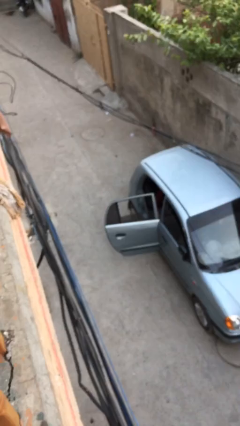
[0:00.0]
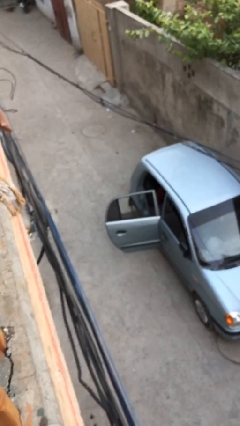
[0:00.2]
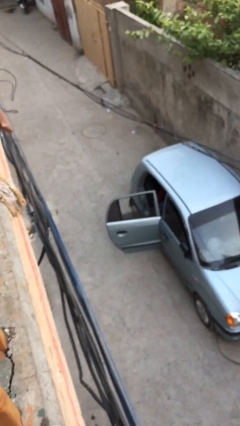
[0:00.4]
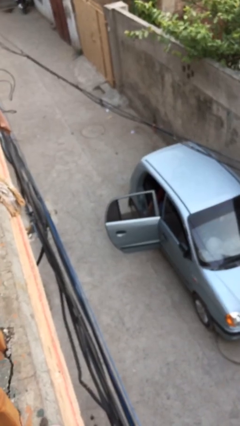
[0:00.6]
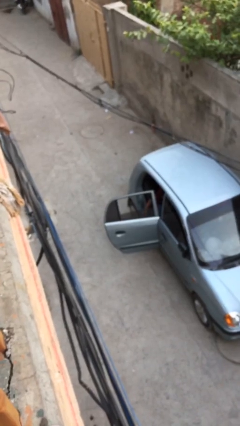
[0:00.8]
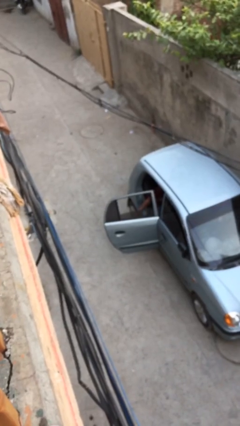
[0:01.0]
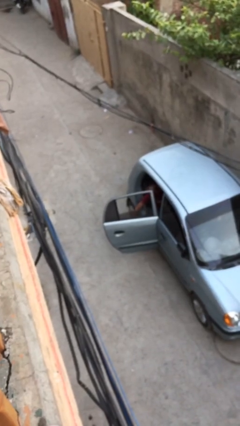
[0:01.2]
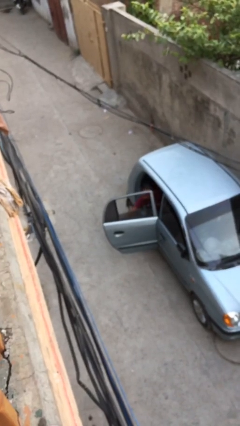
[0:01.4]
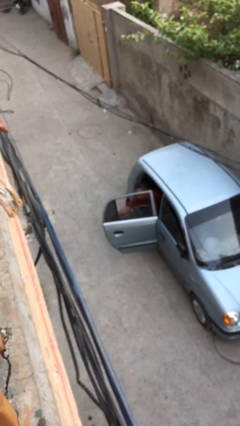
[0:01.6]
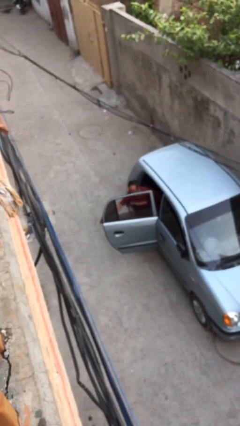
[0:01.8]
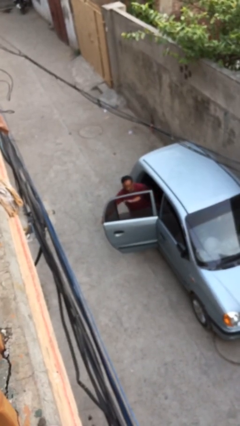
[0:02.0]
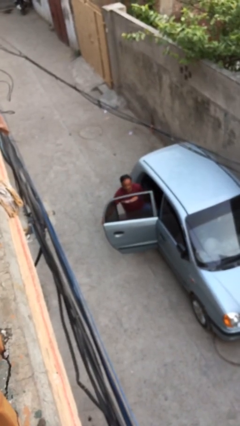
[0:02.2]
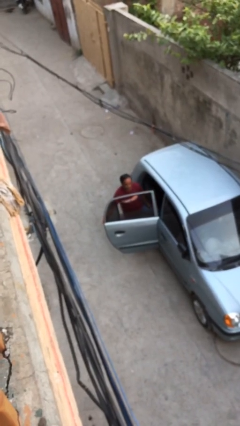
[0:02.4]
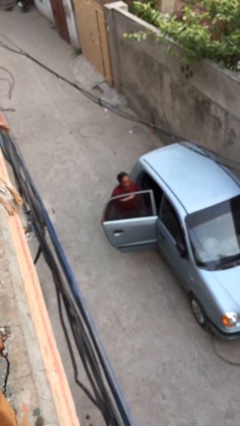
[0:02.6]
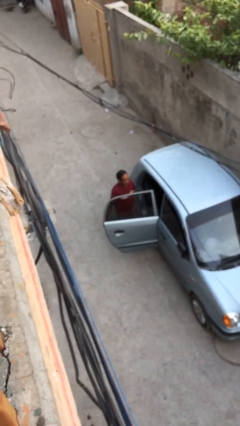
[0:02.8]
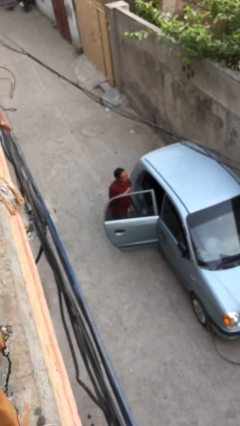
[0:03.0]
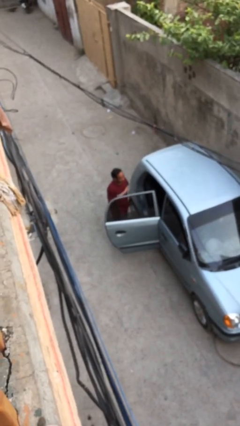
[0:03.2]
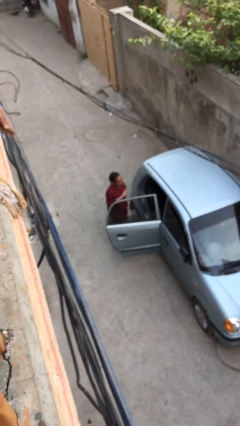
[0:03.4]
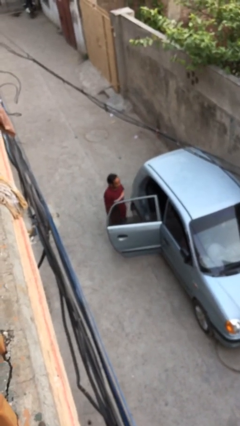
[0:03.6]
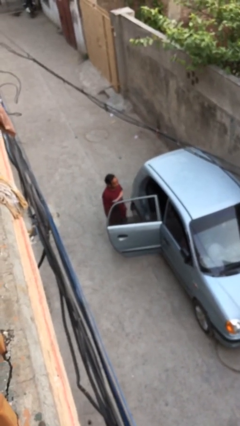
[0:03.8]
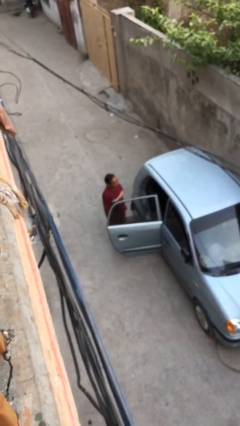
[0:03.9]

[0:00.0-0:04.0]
person exits car

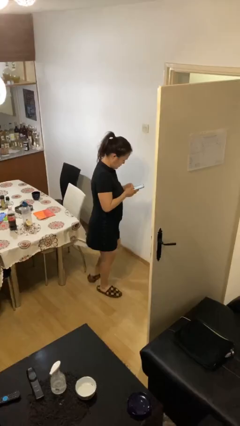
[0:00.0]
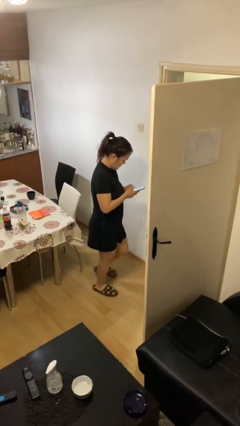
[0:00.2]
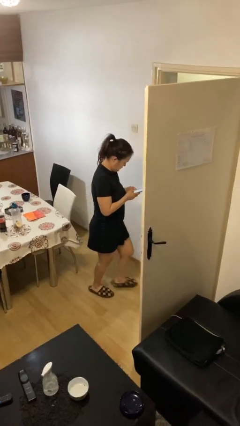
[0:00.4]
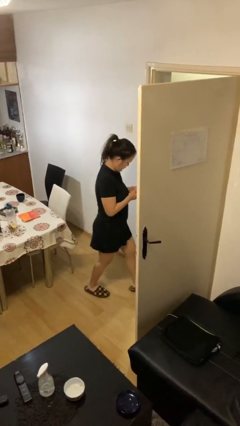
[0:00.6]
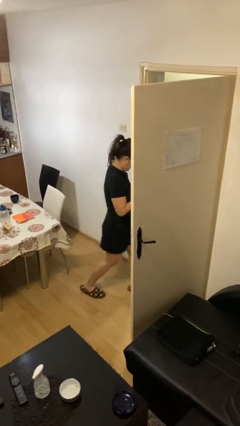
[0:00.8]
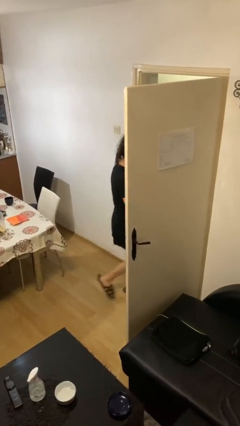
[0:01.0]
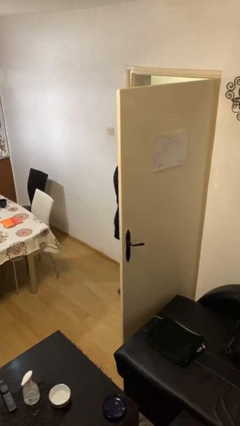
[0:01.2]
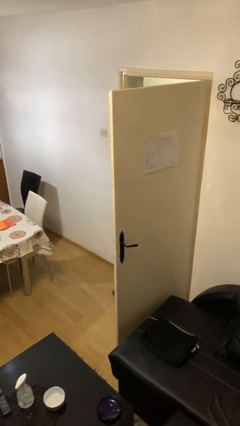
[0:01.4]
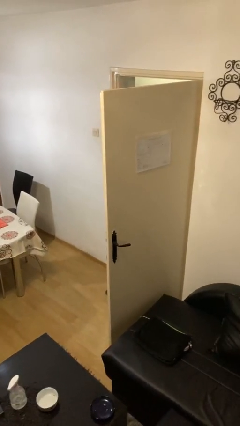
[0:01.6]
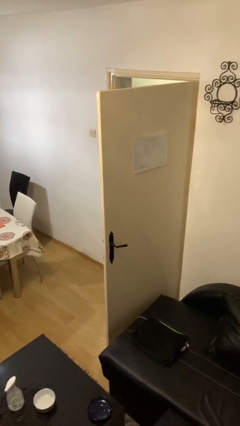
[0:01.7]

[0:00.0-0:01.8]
person exits scene through structure

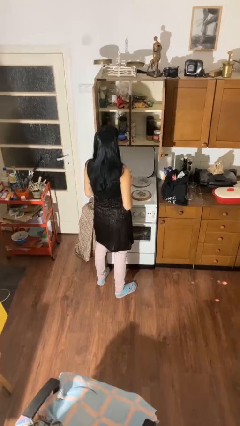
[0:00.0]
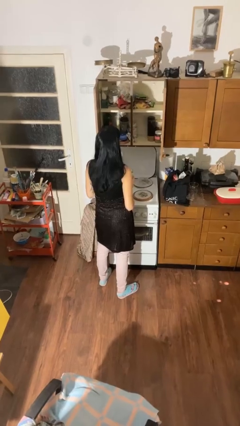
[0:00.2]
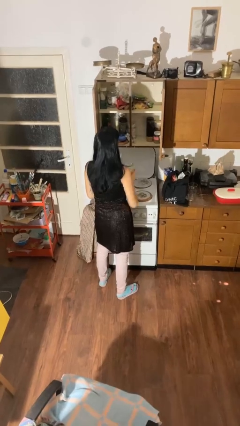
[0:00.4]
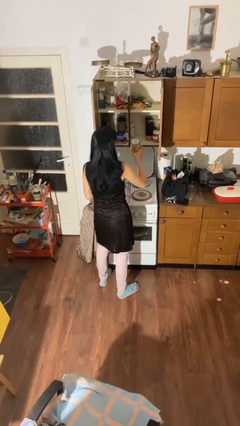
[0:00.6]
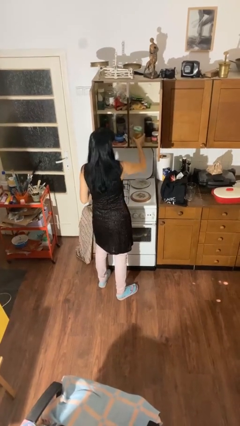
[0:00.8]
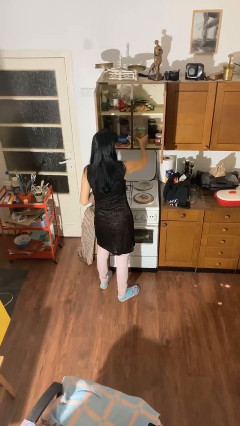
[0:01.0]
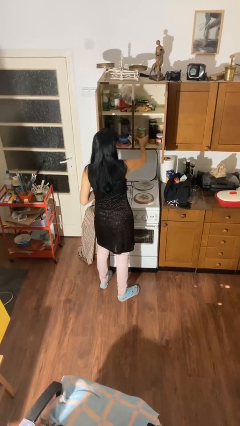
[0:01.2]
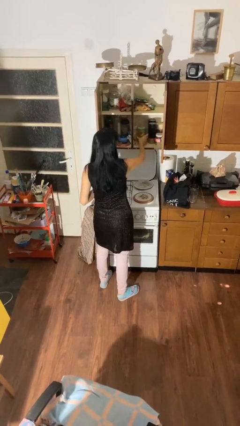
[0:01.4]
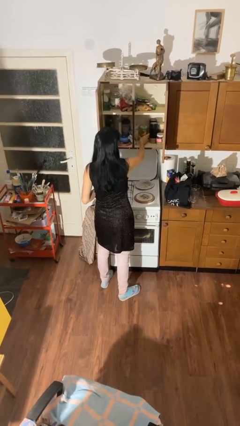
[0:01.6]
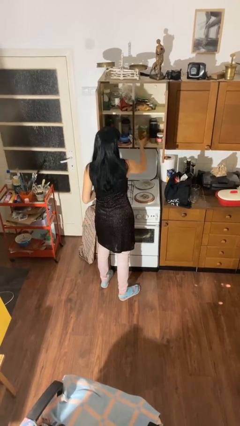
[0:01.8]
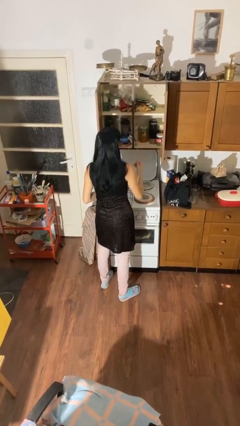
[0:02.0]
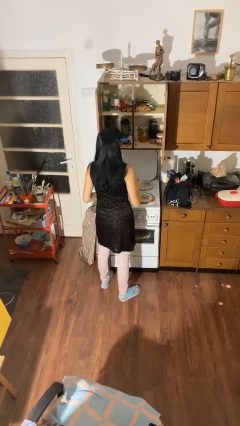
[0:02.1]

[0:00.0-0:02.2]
person puts down object into cabinet

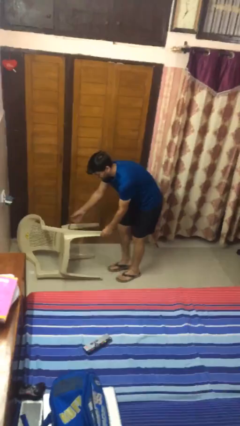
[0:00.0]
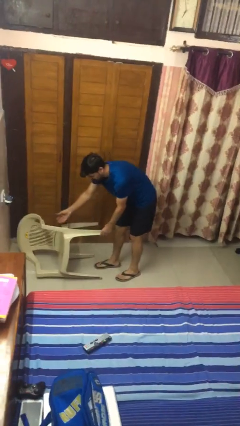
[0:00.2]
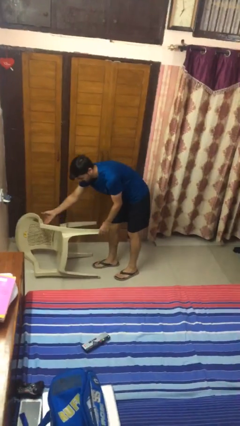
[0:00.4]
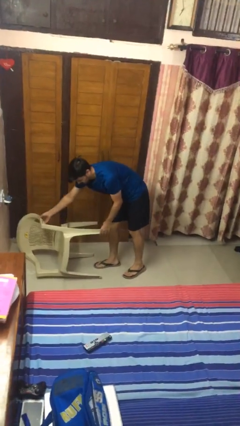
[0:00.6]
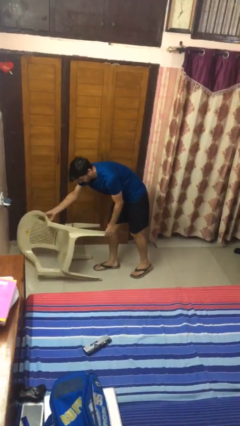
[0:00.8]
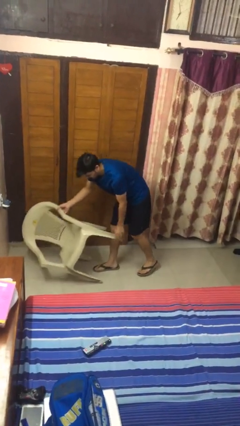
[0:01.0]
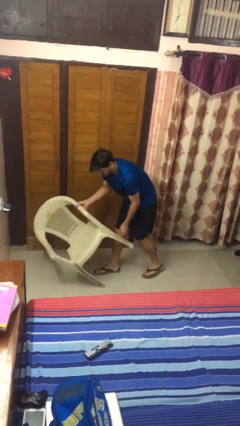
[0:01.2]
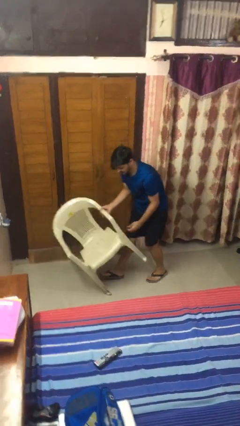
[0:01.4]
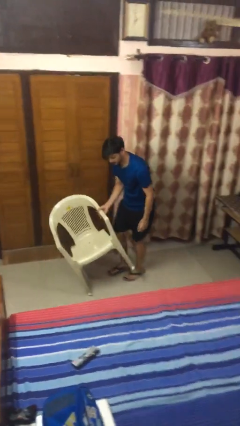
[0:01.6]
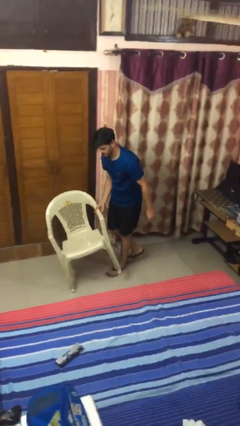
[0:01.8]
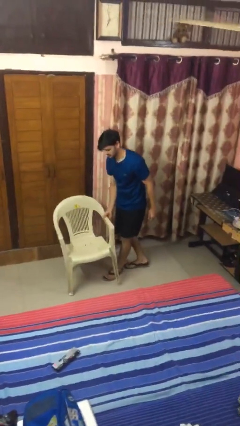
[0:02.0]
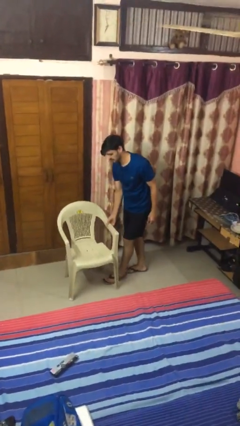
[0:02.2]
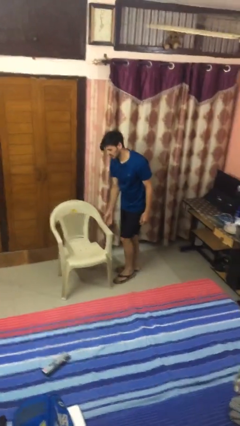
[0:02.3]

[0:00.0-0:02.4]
person sets upright furniture

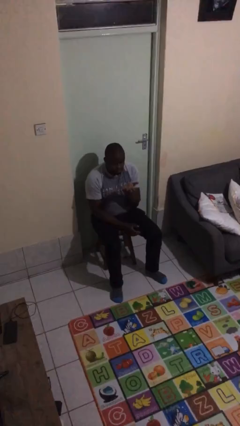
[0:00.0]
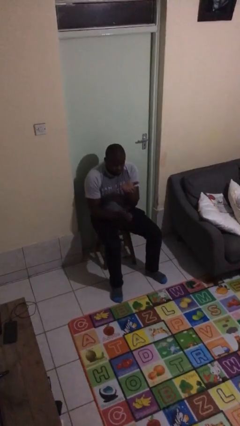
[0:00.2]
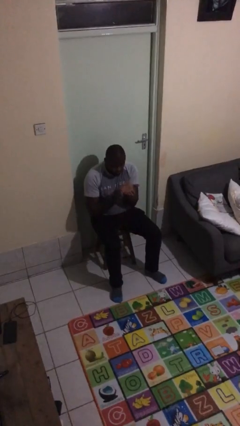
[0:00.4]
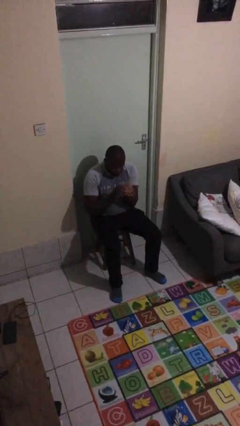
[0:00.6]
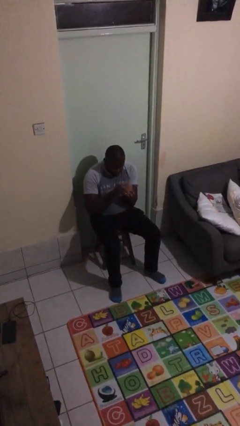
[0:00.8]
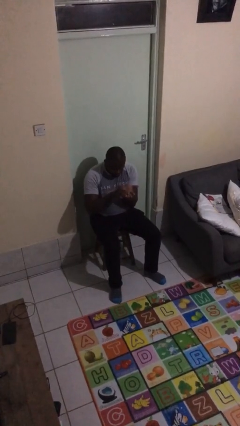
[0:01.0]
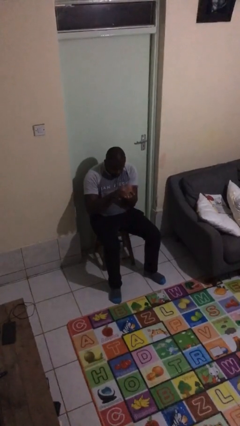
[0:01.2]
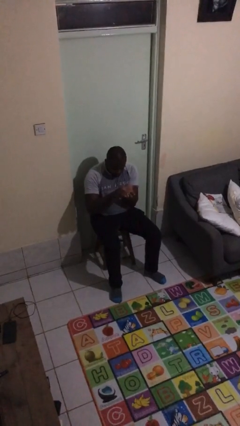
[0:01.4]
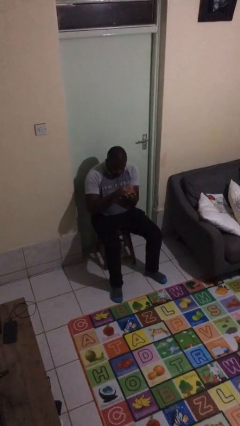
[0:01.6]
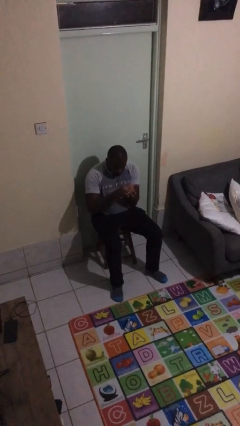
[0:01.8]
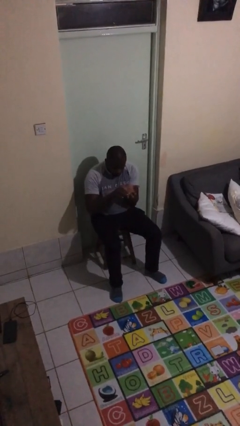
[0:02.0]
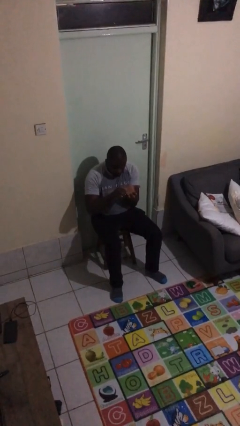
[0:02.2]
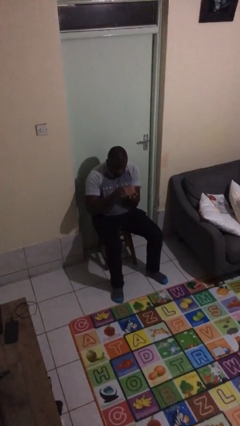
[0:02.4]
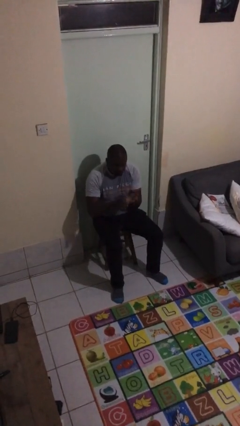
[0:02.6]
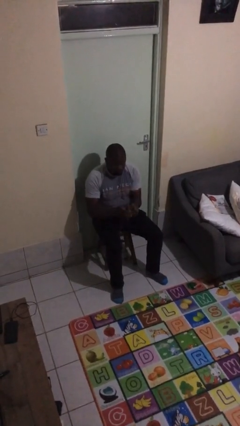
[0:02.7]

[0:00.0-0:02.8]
person looks at hands in lap

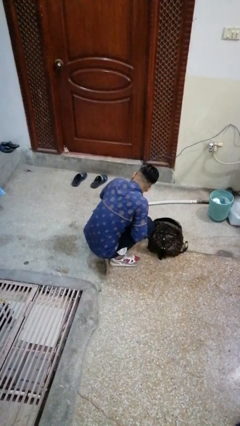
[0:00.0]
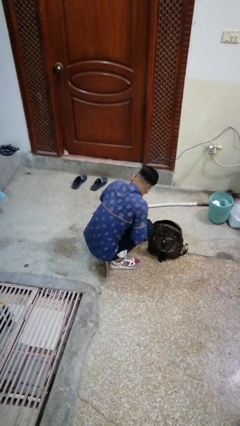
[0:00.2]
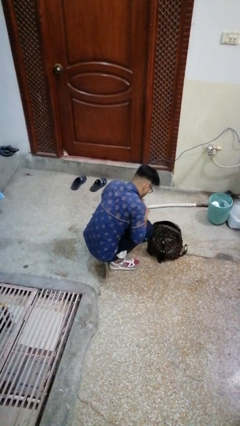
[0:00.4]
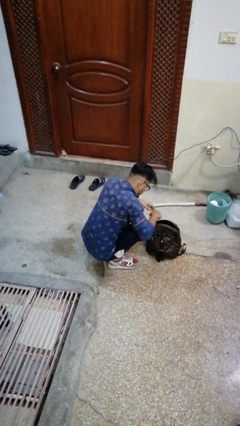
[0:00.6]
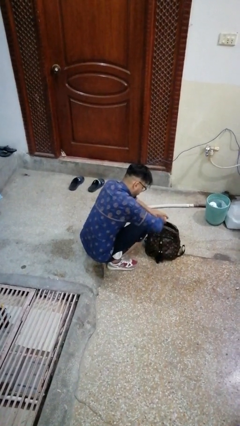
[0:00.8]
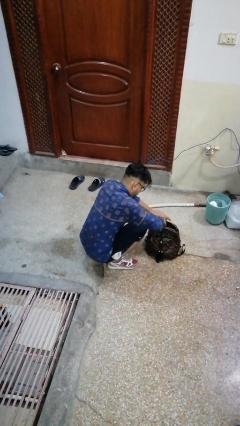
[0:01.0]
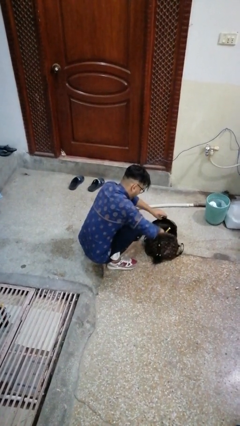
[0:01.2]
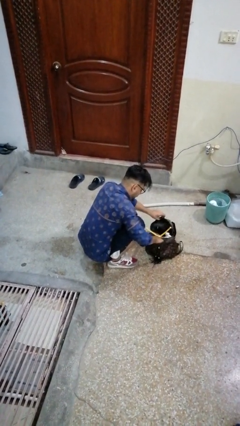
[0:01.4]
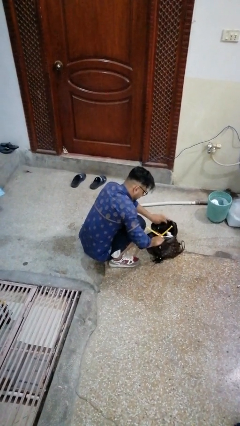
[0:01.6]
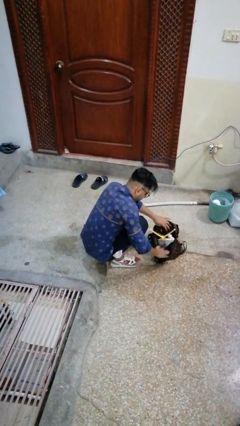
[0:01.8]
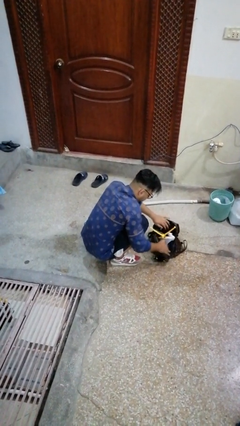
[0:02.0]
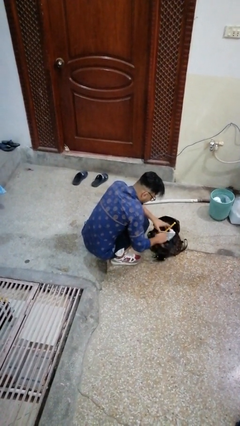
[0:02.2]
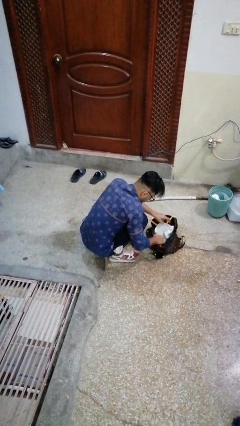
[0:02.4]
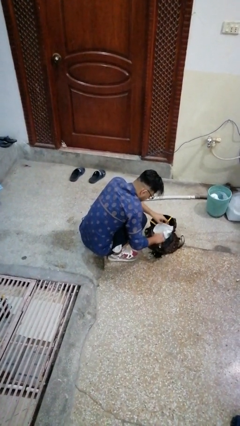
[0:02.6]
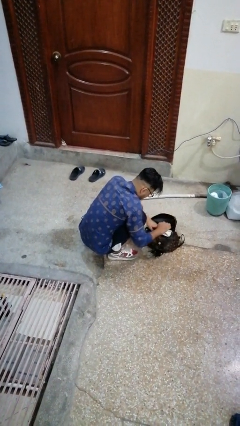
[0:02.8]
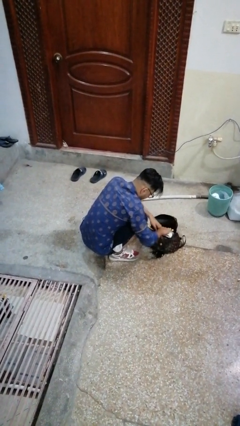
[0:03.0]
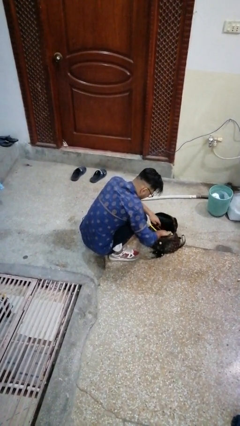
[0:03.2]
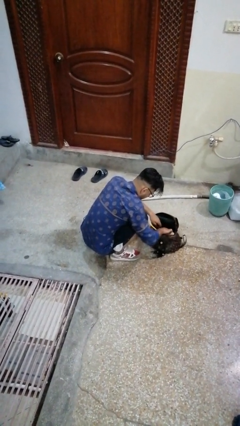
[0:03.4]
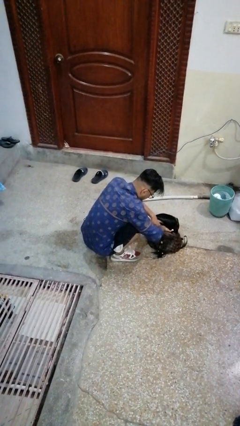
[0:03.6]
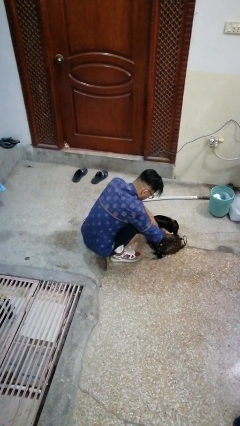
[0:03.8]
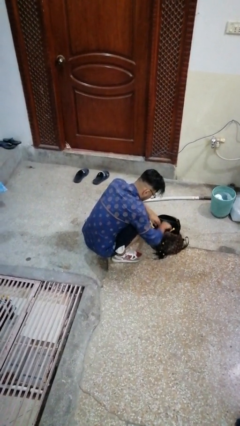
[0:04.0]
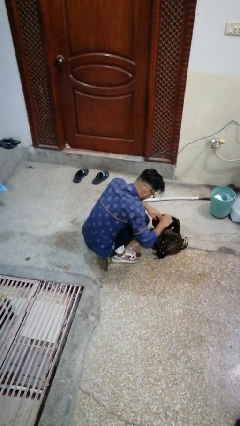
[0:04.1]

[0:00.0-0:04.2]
person searches in bag
